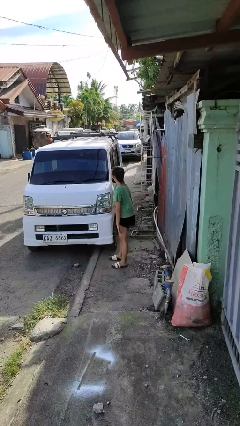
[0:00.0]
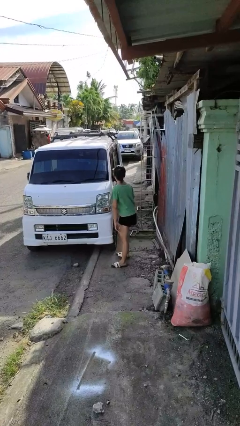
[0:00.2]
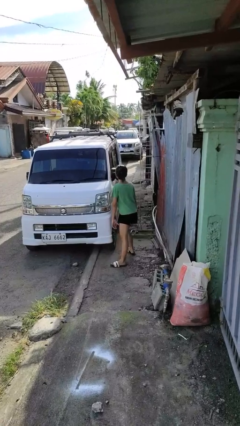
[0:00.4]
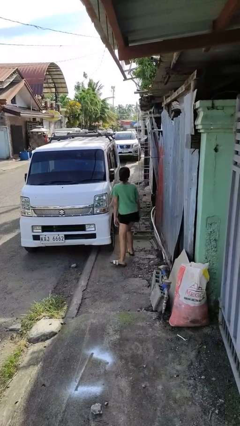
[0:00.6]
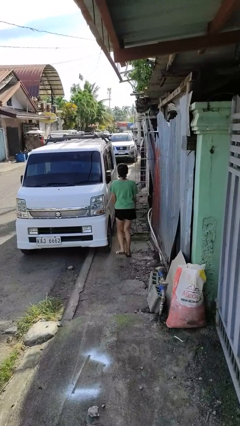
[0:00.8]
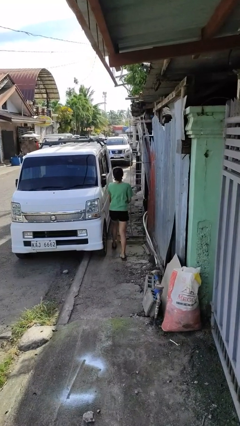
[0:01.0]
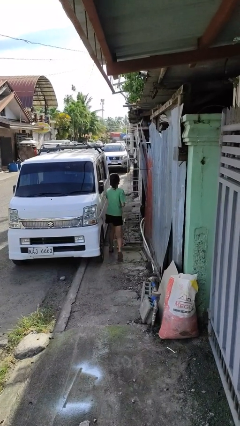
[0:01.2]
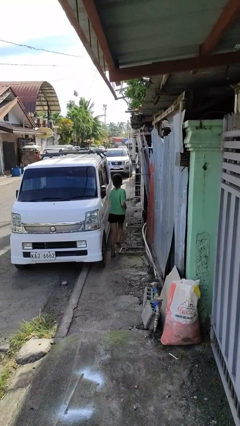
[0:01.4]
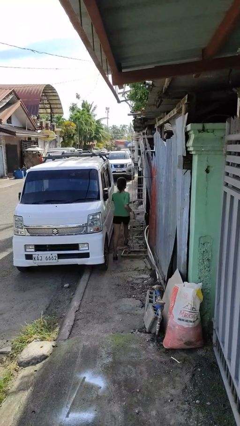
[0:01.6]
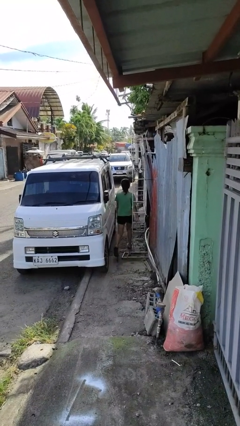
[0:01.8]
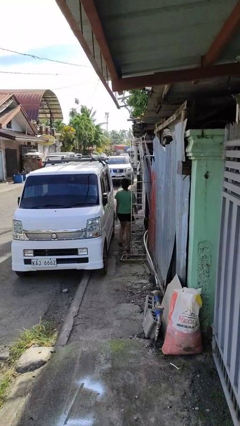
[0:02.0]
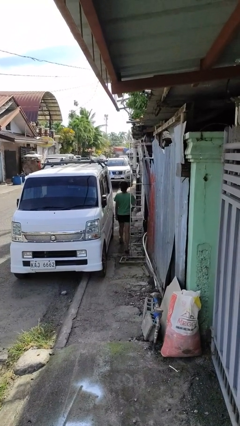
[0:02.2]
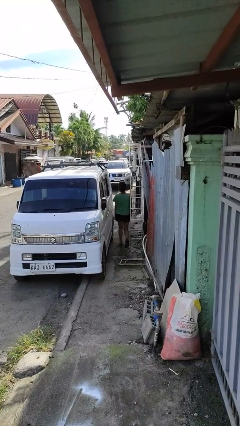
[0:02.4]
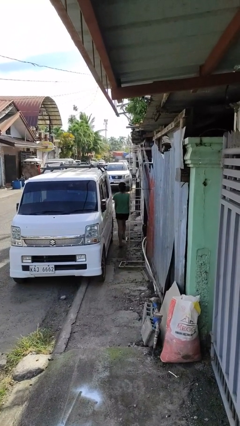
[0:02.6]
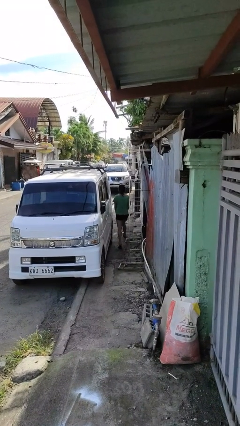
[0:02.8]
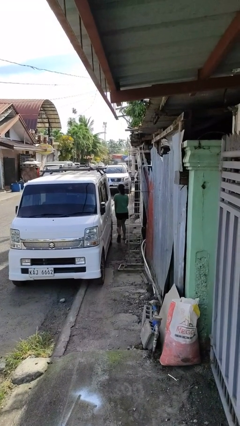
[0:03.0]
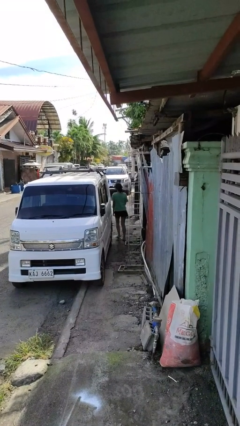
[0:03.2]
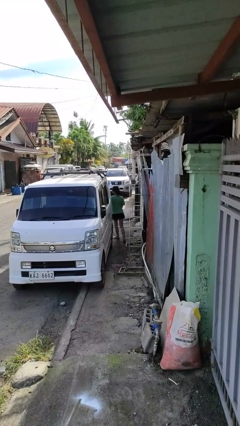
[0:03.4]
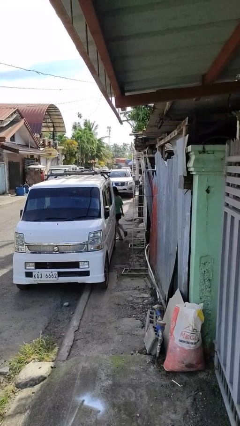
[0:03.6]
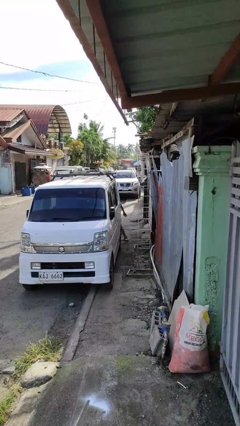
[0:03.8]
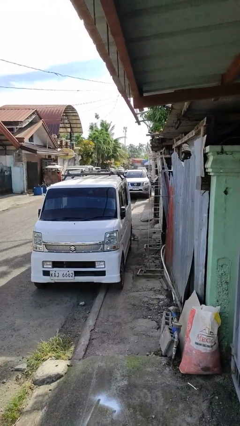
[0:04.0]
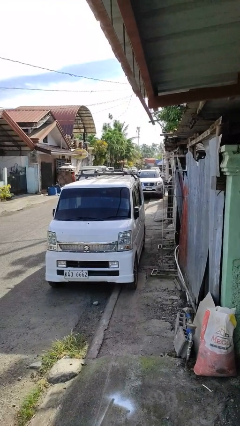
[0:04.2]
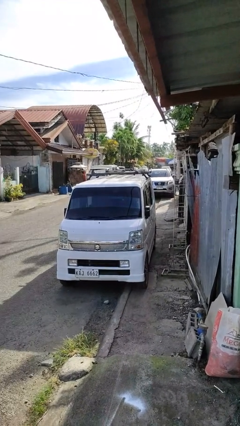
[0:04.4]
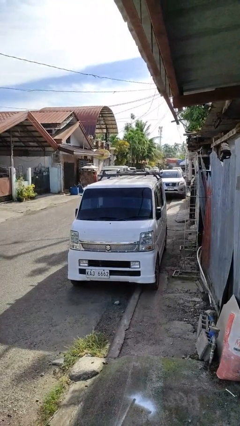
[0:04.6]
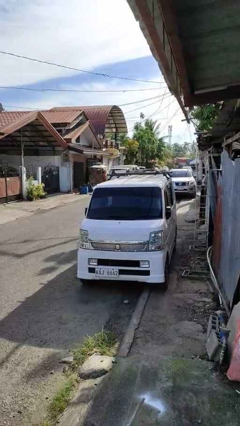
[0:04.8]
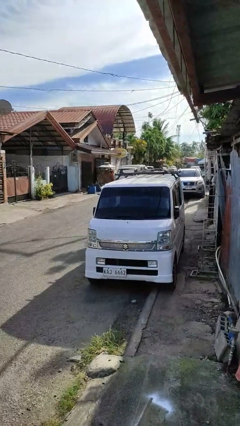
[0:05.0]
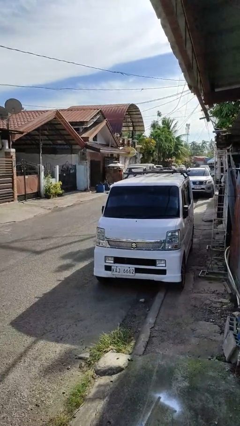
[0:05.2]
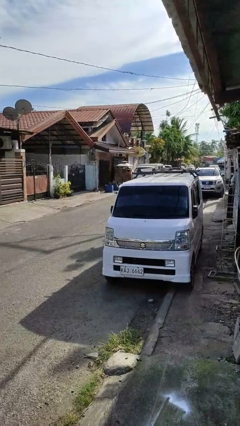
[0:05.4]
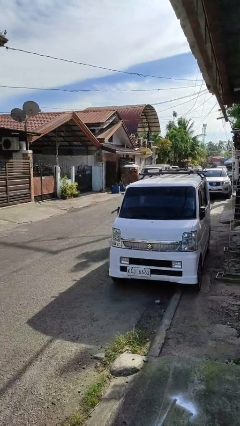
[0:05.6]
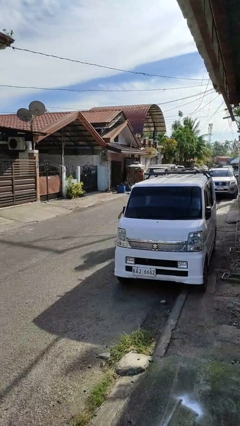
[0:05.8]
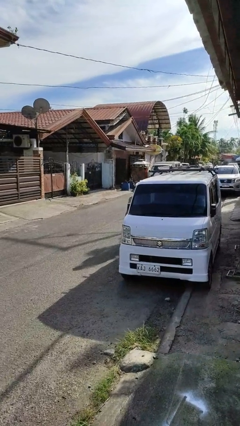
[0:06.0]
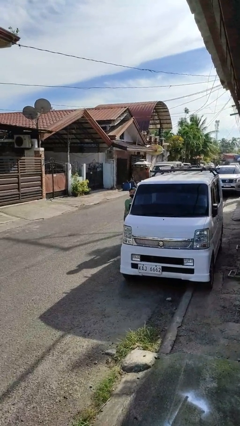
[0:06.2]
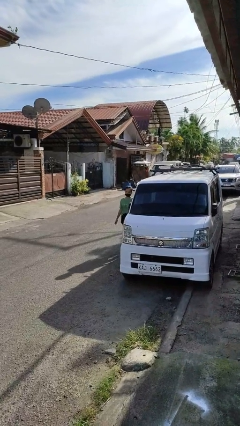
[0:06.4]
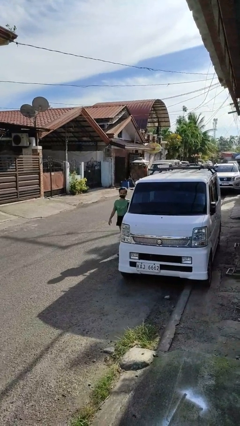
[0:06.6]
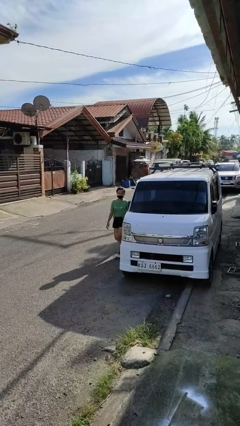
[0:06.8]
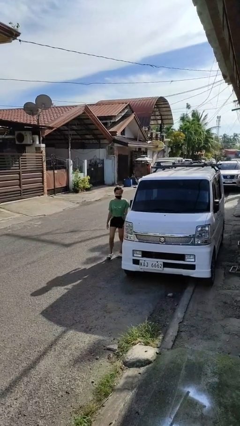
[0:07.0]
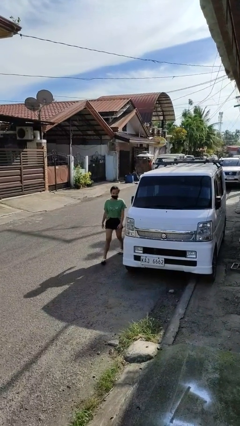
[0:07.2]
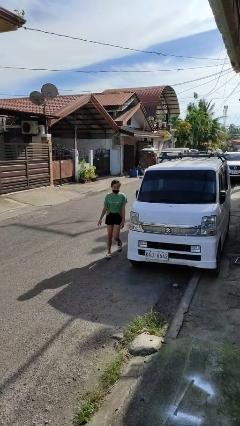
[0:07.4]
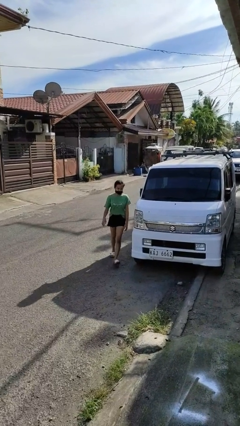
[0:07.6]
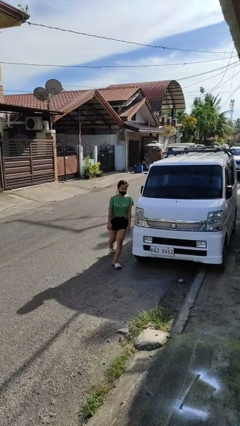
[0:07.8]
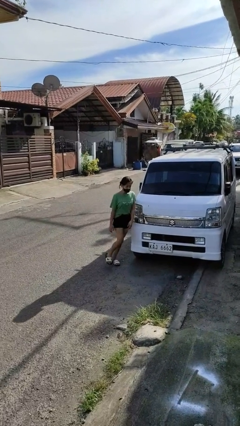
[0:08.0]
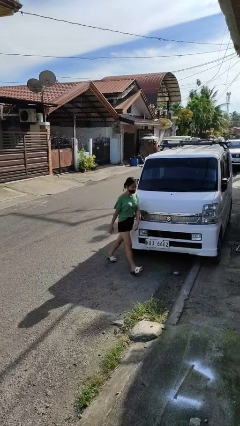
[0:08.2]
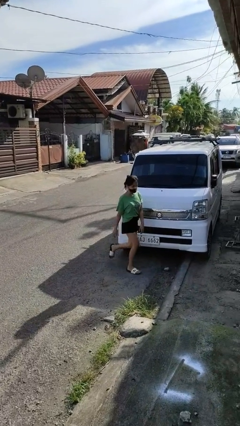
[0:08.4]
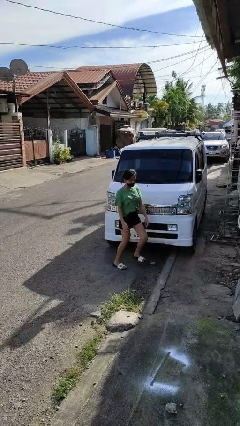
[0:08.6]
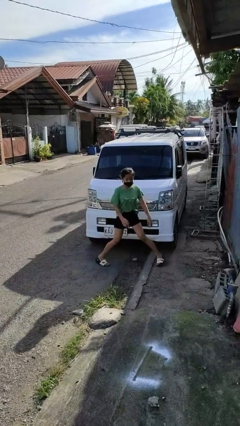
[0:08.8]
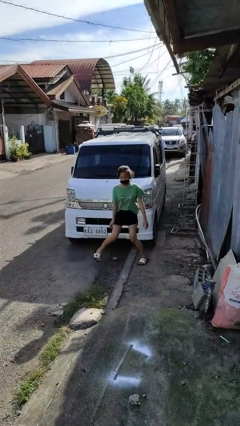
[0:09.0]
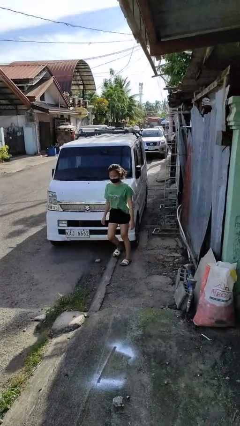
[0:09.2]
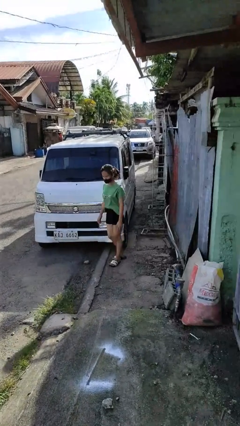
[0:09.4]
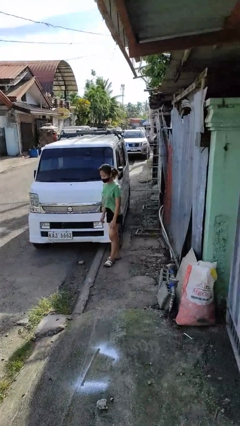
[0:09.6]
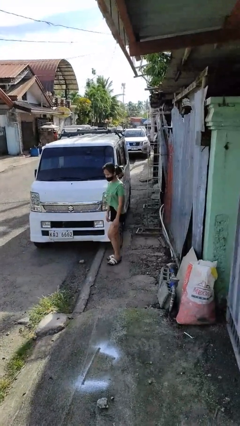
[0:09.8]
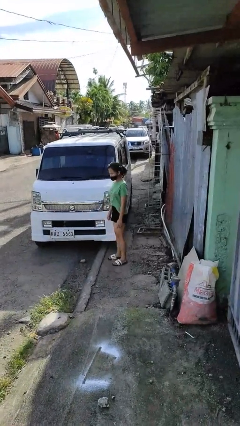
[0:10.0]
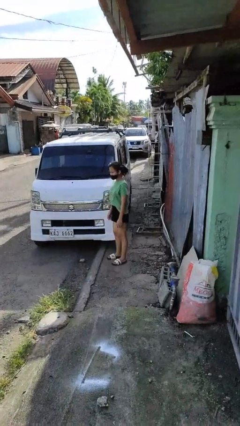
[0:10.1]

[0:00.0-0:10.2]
person walks around car

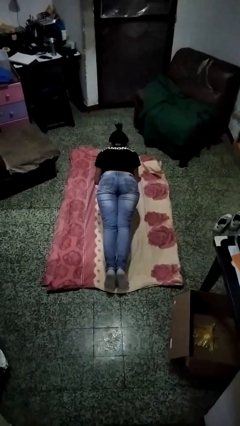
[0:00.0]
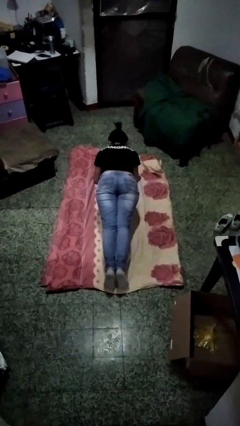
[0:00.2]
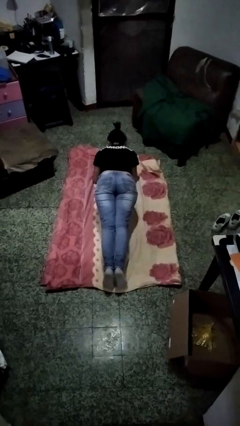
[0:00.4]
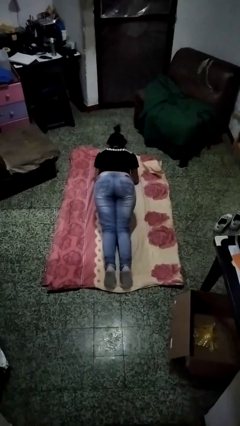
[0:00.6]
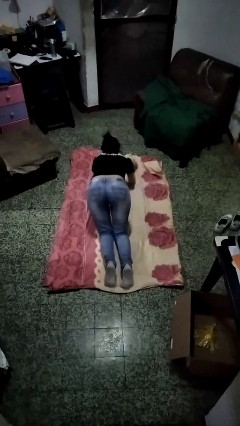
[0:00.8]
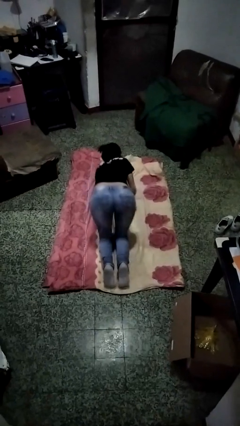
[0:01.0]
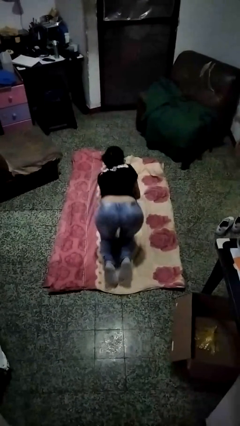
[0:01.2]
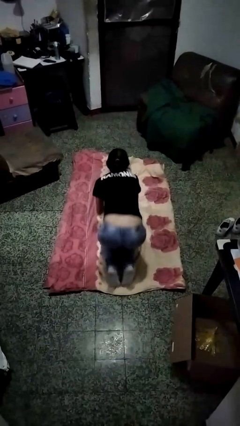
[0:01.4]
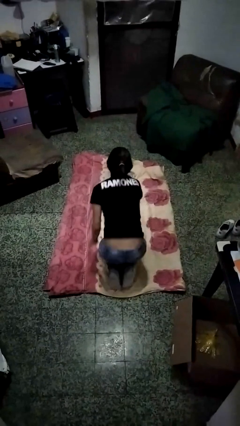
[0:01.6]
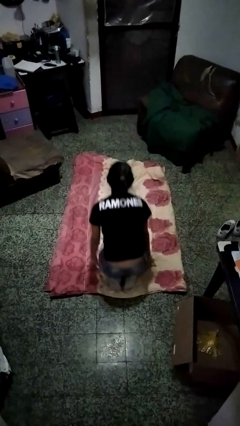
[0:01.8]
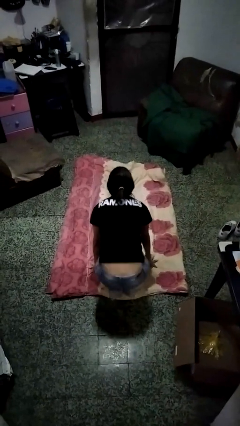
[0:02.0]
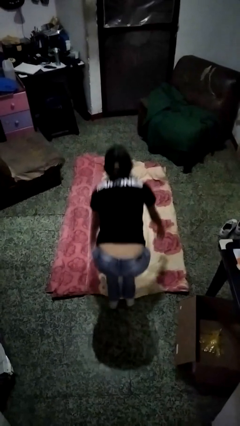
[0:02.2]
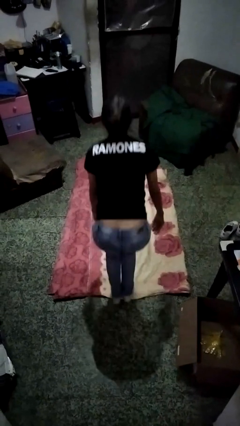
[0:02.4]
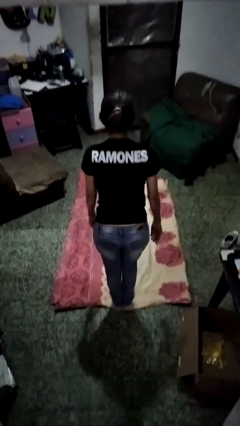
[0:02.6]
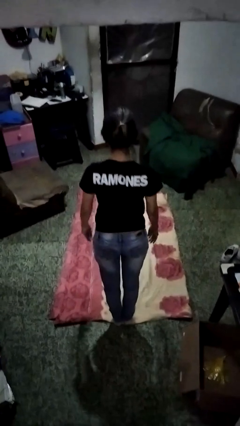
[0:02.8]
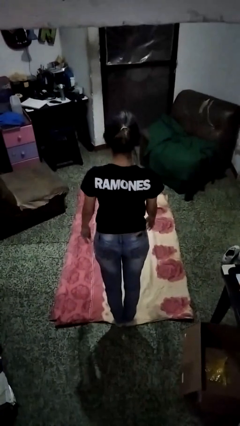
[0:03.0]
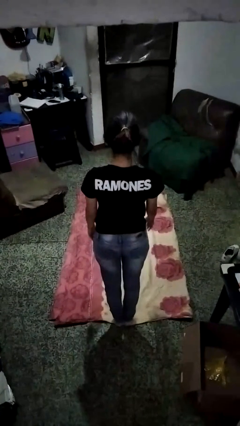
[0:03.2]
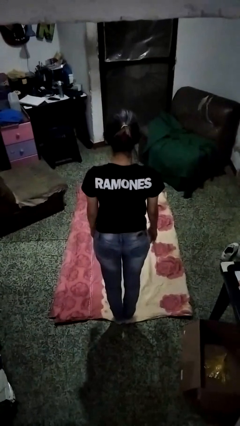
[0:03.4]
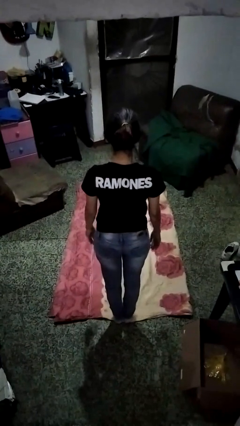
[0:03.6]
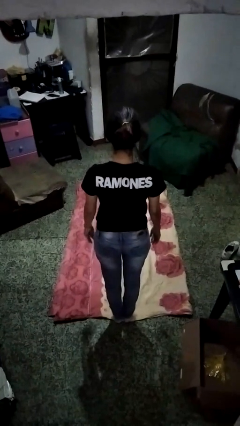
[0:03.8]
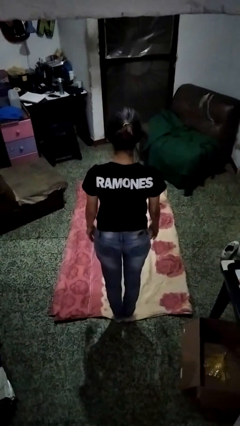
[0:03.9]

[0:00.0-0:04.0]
person stands up from floor

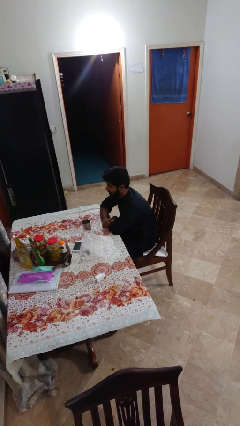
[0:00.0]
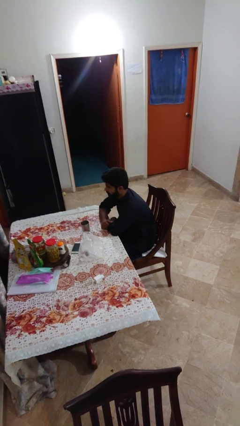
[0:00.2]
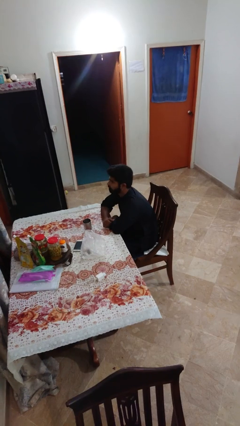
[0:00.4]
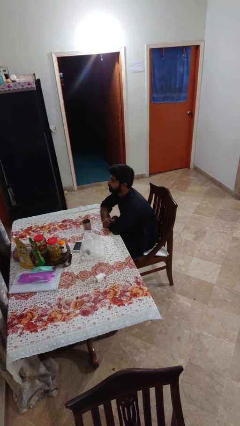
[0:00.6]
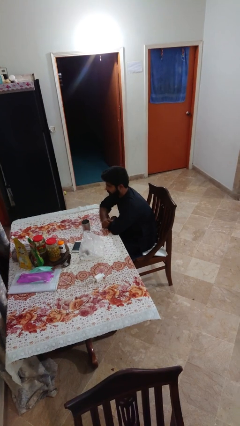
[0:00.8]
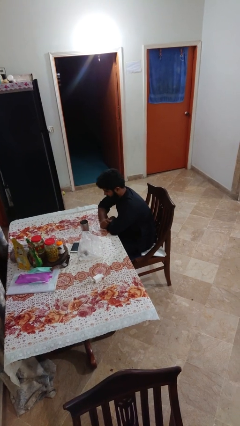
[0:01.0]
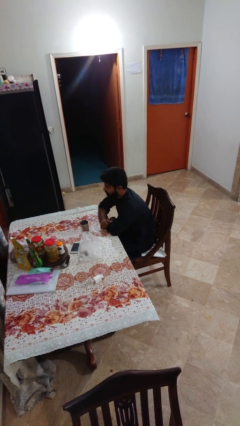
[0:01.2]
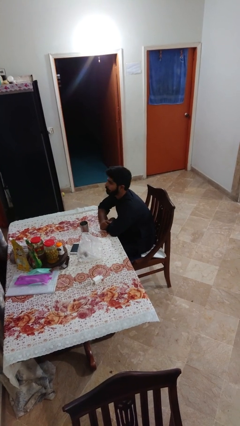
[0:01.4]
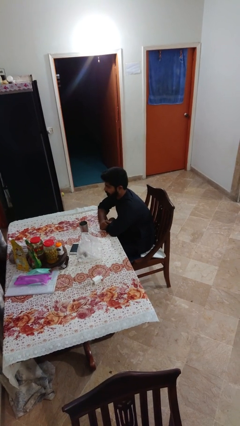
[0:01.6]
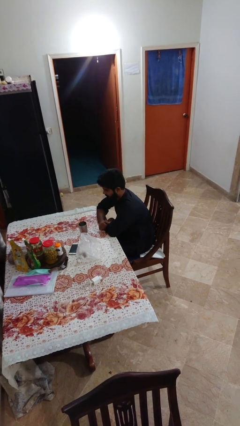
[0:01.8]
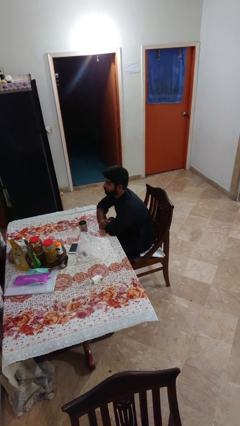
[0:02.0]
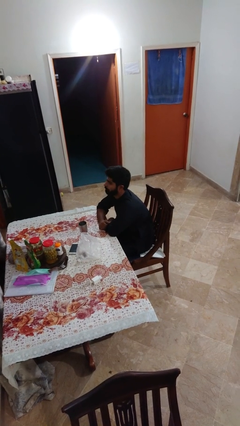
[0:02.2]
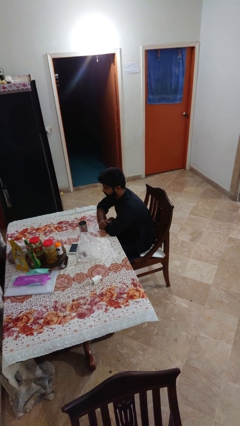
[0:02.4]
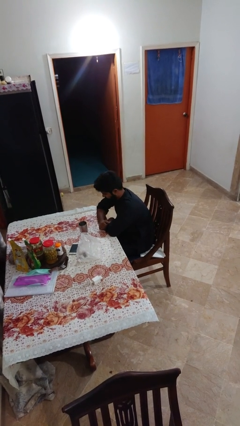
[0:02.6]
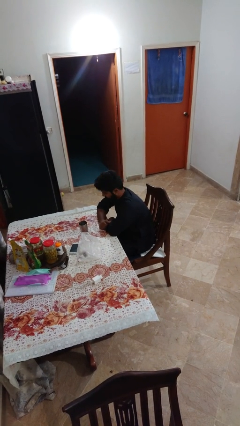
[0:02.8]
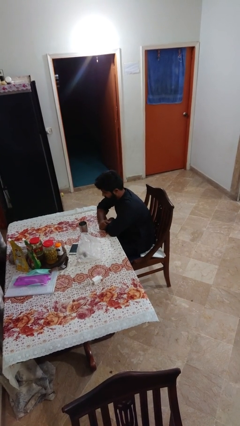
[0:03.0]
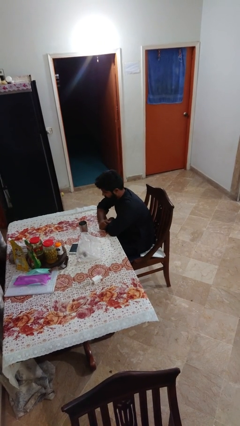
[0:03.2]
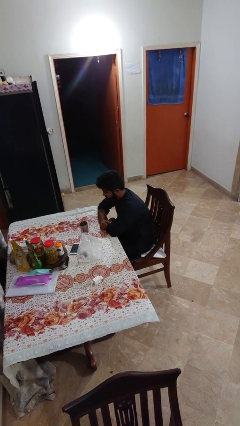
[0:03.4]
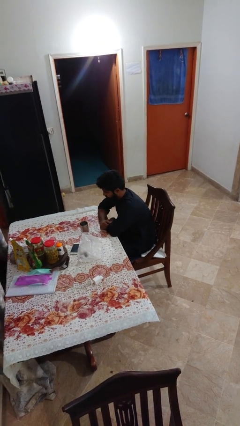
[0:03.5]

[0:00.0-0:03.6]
person nods head

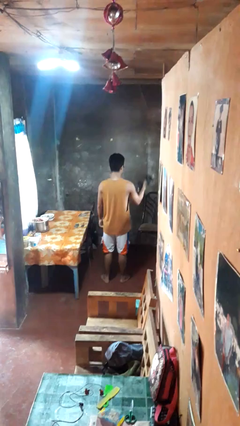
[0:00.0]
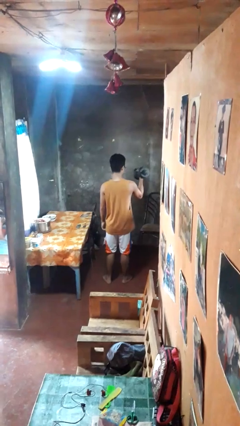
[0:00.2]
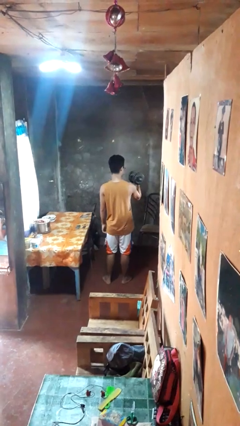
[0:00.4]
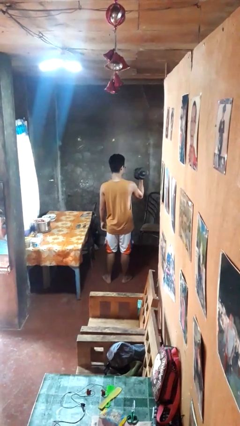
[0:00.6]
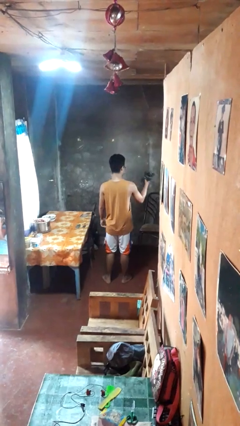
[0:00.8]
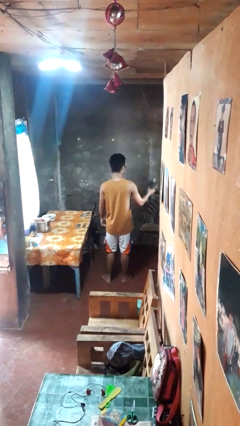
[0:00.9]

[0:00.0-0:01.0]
person lifts dumbbells
